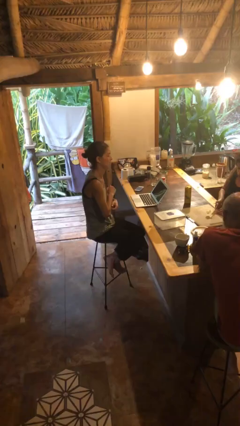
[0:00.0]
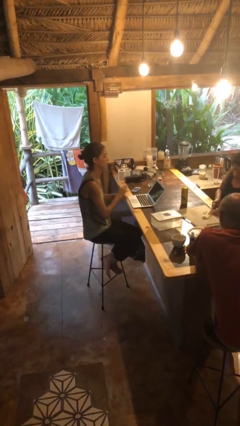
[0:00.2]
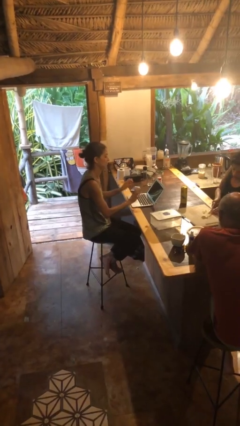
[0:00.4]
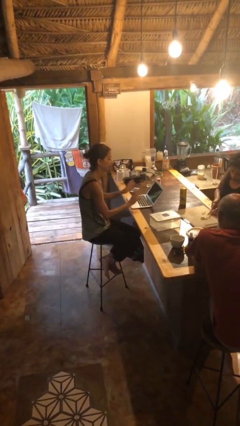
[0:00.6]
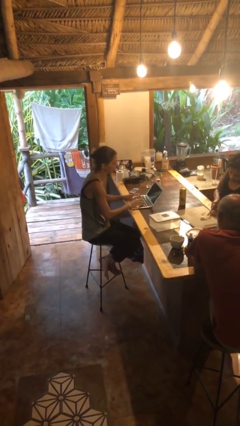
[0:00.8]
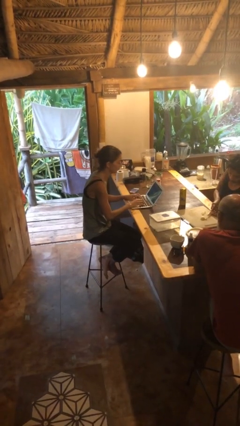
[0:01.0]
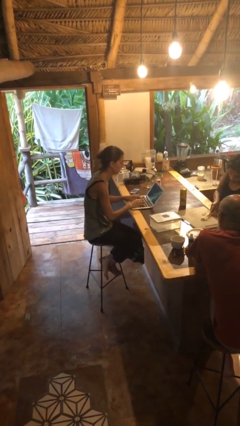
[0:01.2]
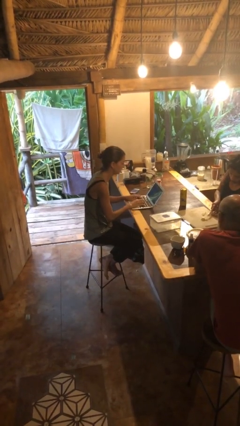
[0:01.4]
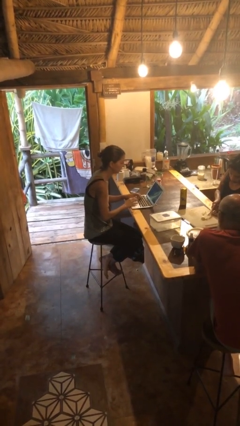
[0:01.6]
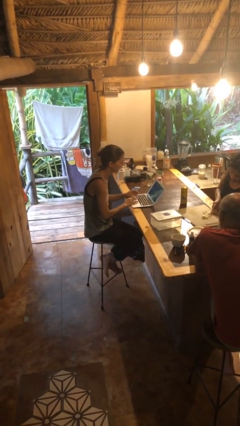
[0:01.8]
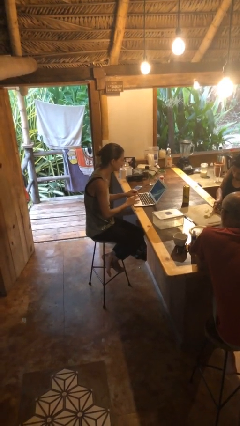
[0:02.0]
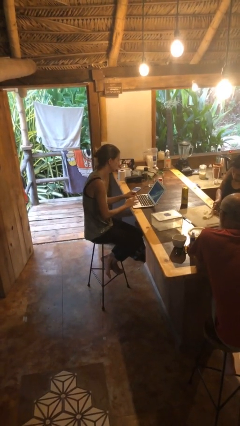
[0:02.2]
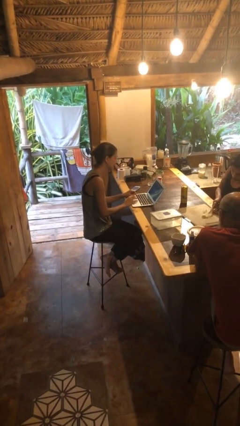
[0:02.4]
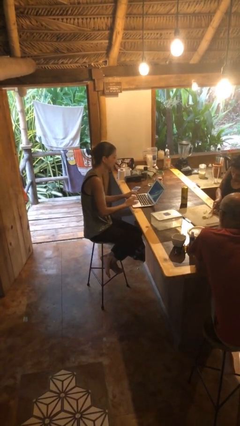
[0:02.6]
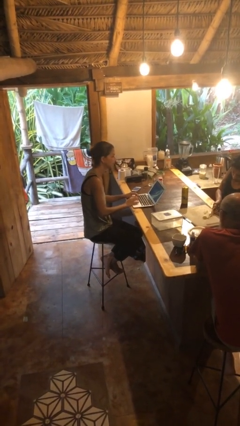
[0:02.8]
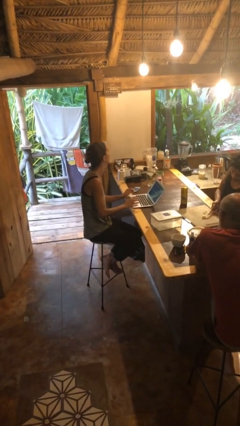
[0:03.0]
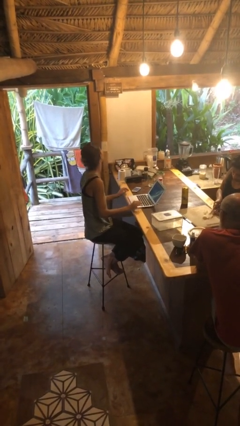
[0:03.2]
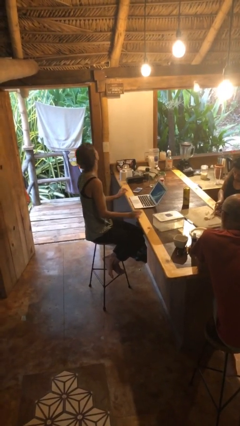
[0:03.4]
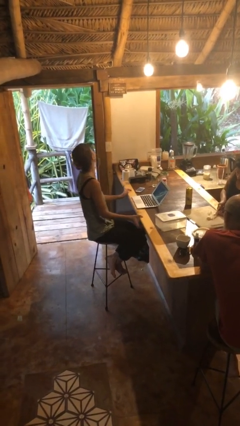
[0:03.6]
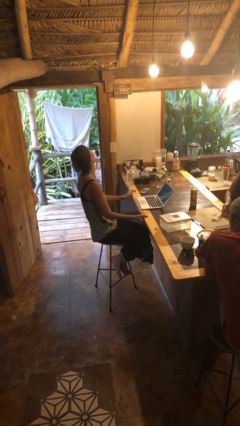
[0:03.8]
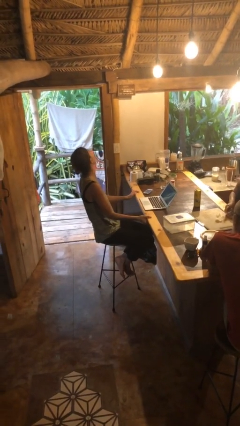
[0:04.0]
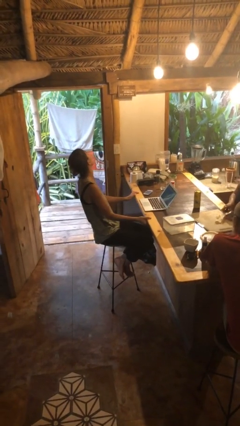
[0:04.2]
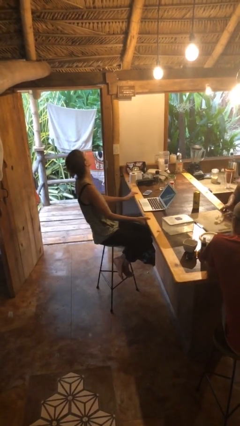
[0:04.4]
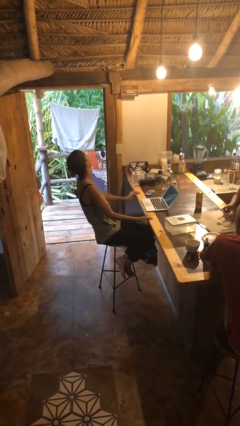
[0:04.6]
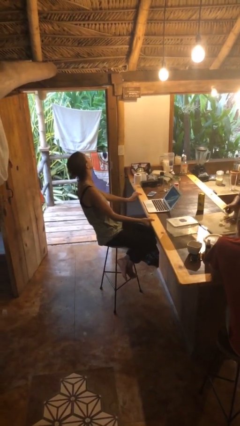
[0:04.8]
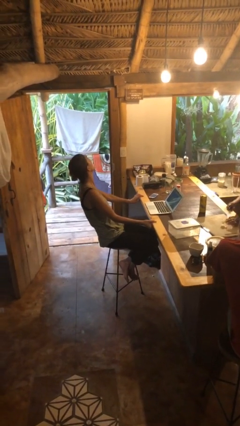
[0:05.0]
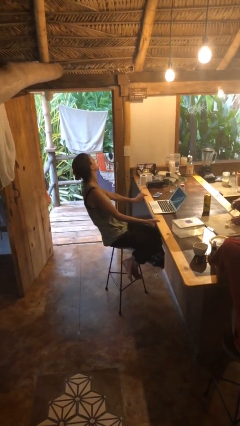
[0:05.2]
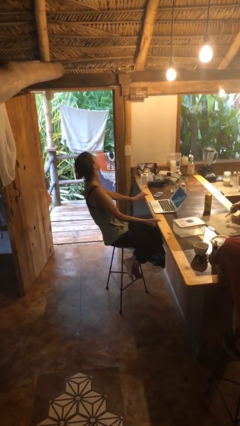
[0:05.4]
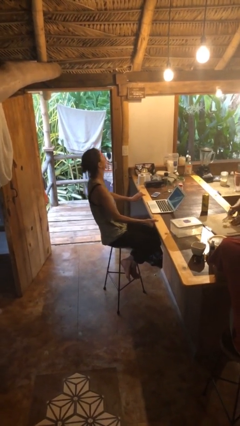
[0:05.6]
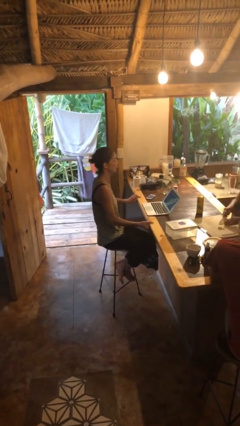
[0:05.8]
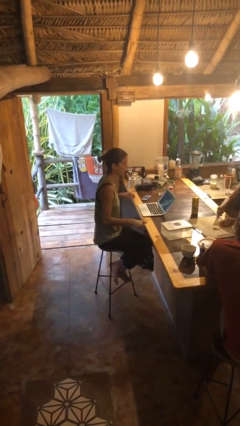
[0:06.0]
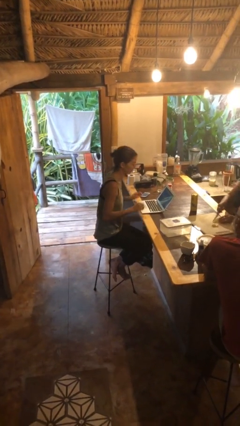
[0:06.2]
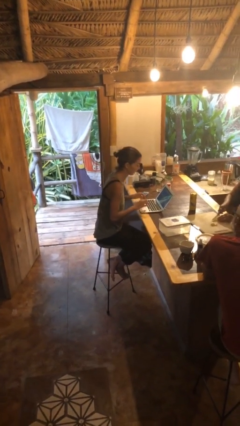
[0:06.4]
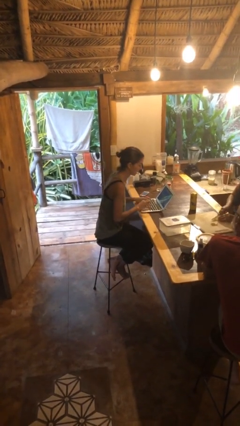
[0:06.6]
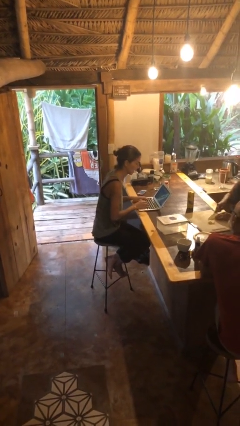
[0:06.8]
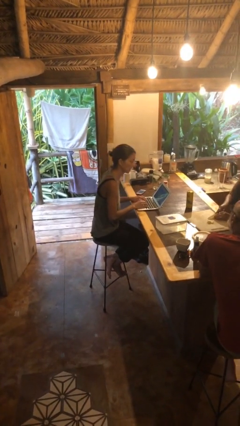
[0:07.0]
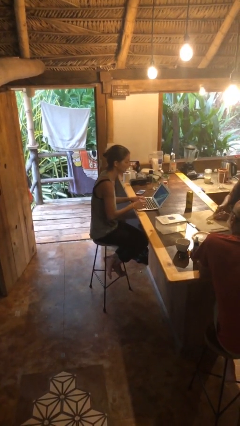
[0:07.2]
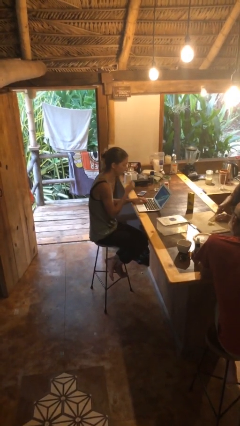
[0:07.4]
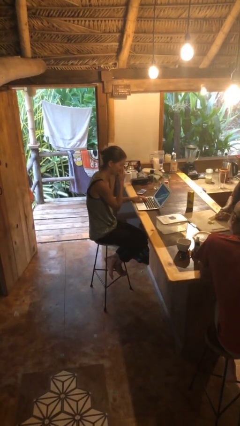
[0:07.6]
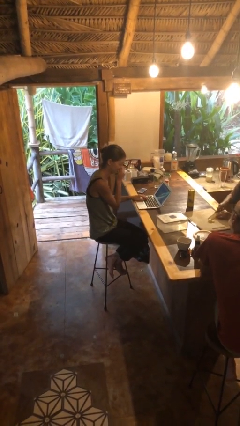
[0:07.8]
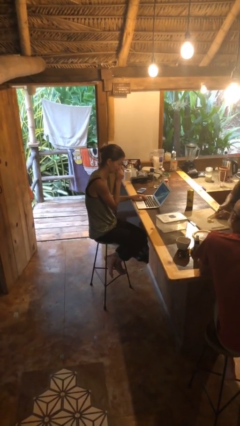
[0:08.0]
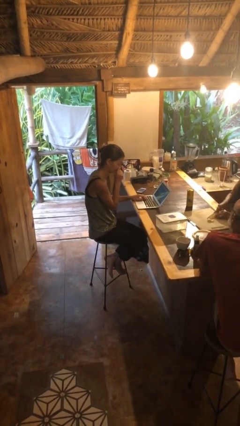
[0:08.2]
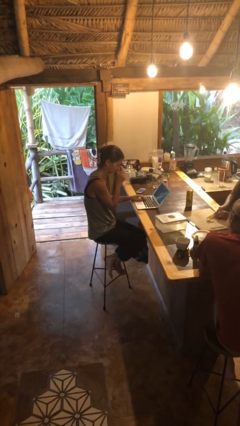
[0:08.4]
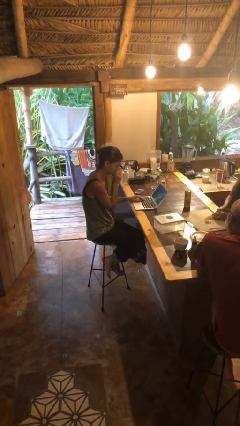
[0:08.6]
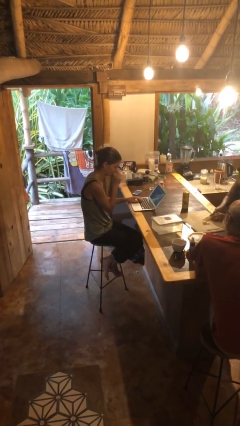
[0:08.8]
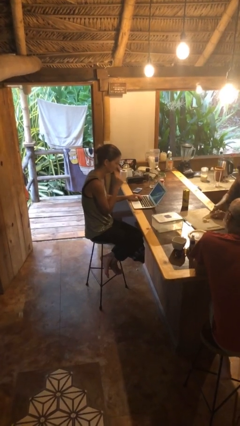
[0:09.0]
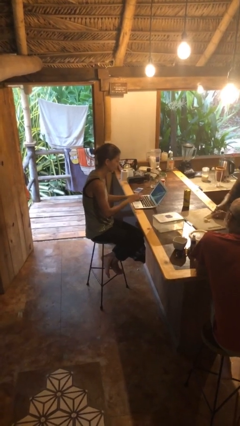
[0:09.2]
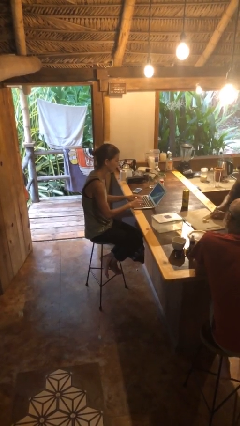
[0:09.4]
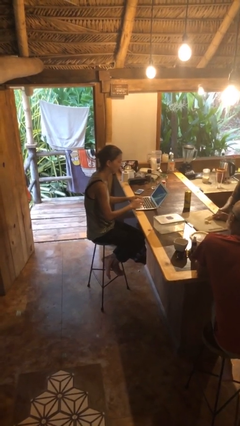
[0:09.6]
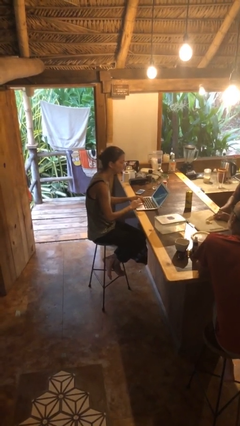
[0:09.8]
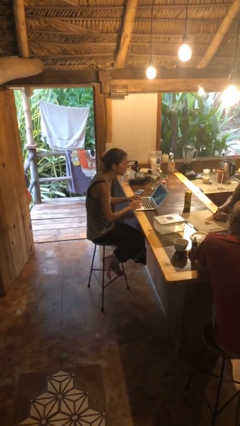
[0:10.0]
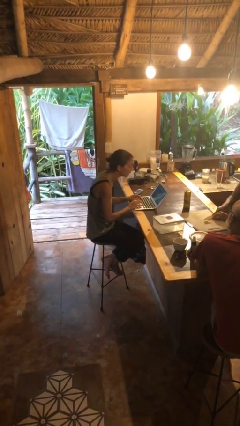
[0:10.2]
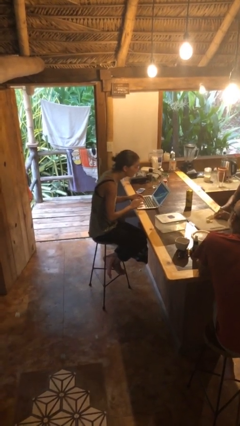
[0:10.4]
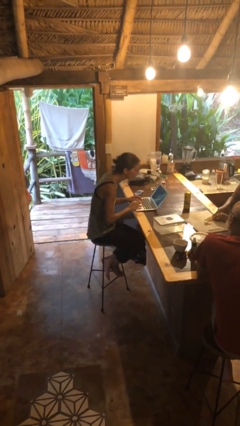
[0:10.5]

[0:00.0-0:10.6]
person interacts with laptop

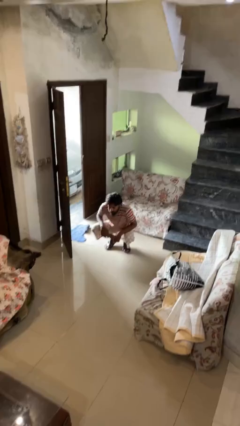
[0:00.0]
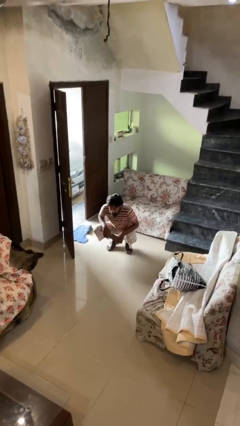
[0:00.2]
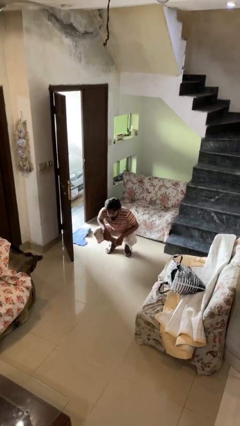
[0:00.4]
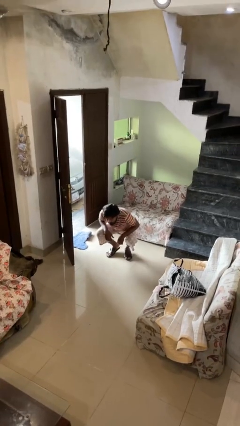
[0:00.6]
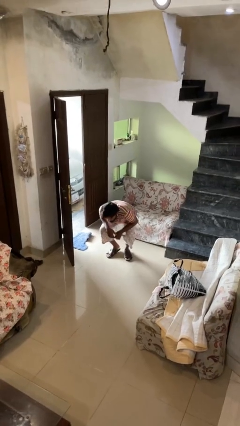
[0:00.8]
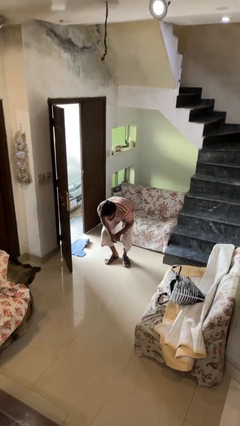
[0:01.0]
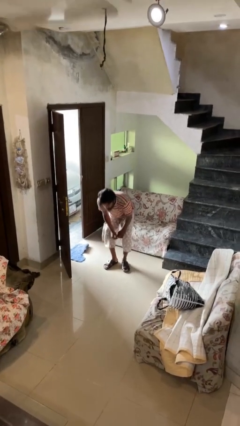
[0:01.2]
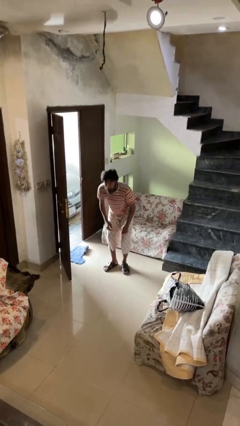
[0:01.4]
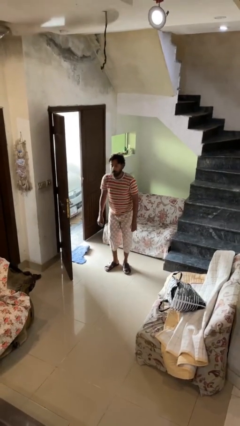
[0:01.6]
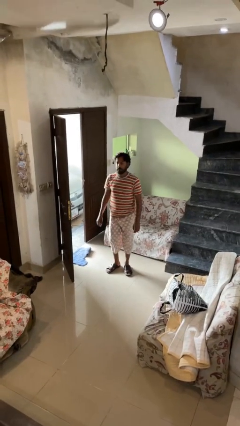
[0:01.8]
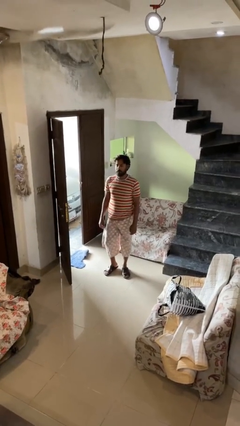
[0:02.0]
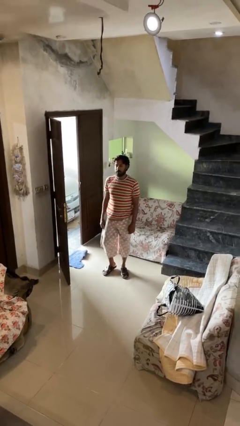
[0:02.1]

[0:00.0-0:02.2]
person stands up

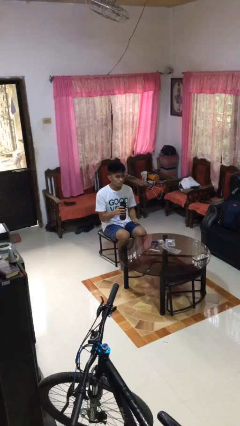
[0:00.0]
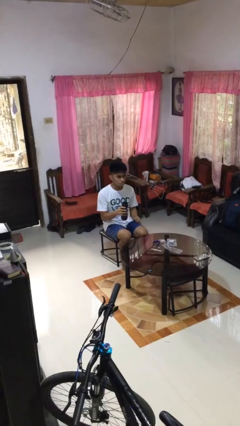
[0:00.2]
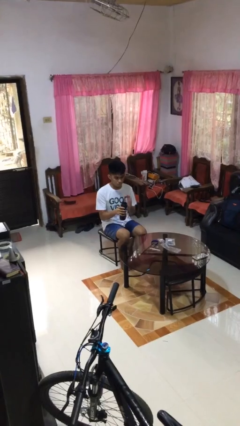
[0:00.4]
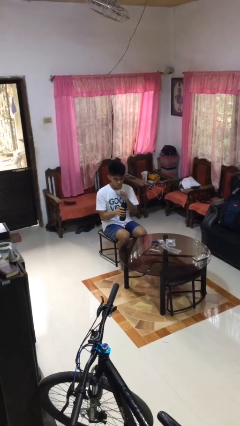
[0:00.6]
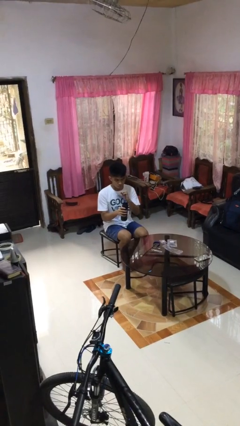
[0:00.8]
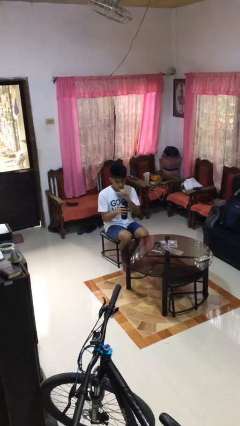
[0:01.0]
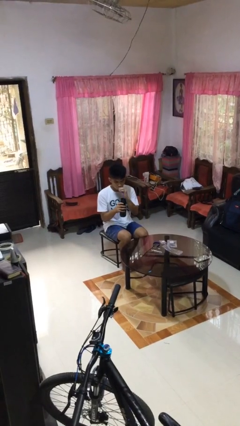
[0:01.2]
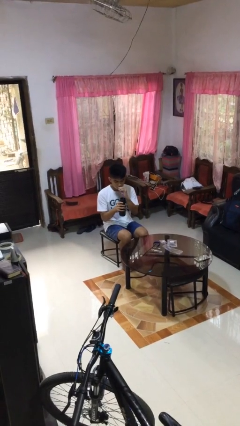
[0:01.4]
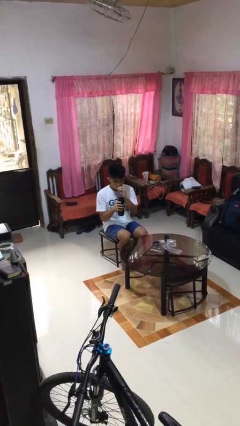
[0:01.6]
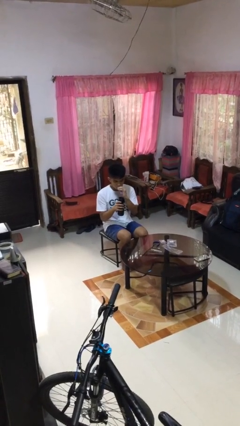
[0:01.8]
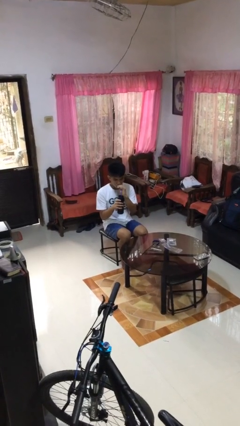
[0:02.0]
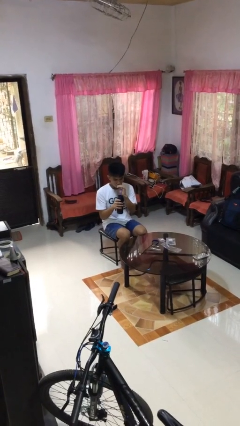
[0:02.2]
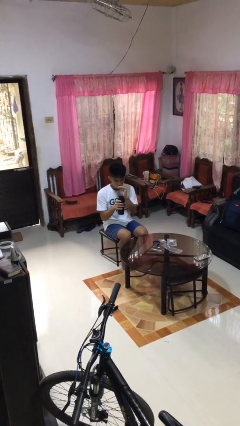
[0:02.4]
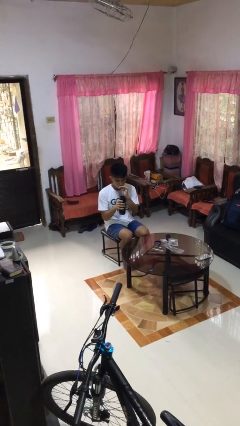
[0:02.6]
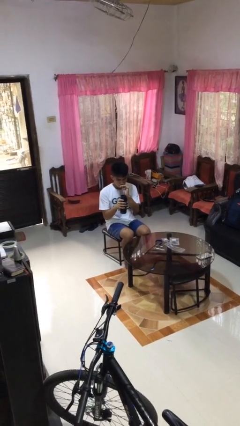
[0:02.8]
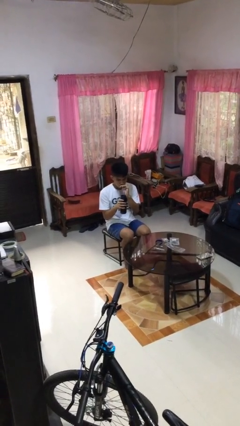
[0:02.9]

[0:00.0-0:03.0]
person drinks from straw

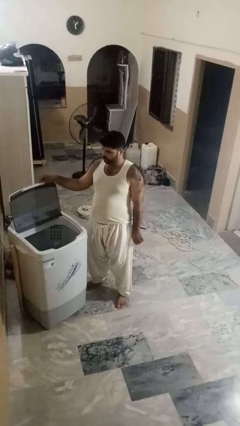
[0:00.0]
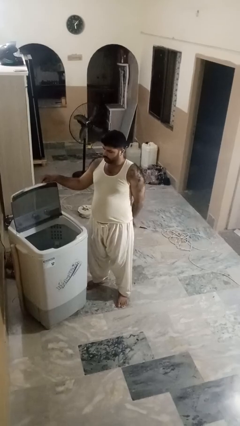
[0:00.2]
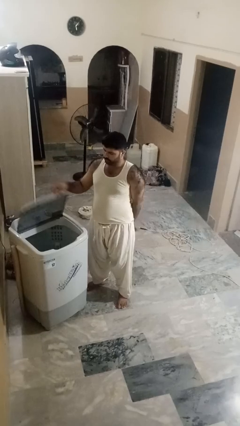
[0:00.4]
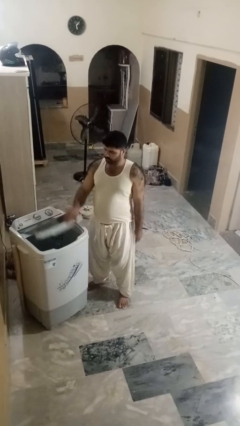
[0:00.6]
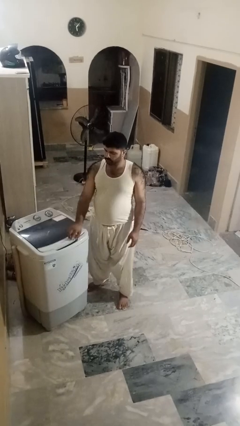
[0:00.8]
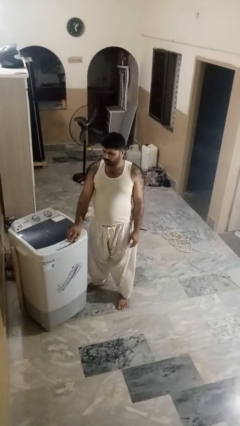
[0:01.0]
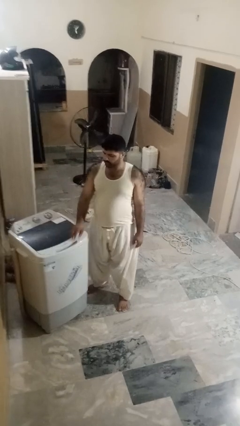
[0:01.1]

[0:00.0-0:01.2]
person closes clothes washer

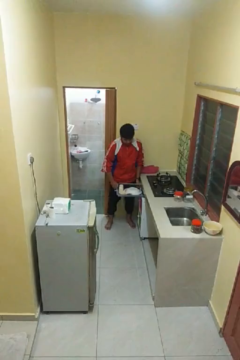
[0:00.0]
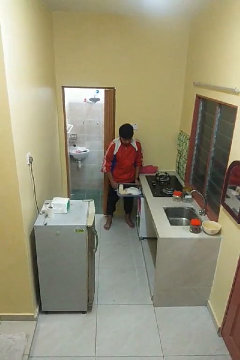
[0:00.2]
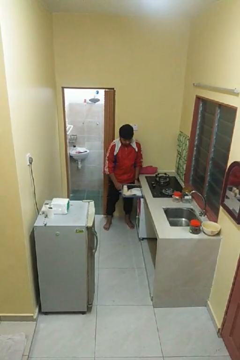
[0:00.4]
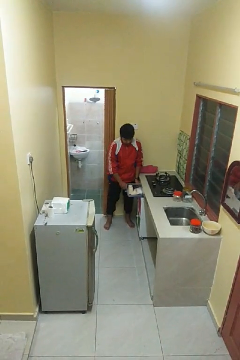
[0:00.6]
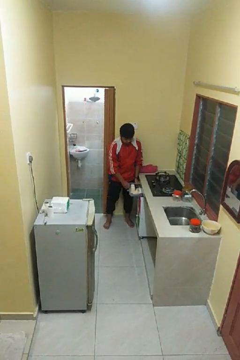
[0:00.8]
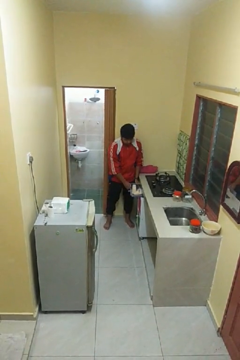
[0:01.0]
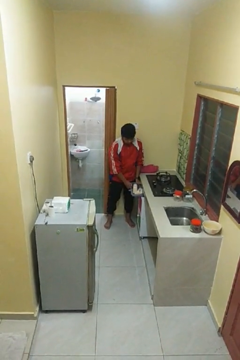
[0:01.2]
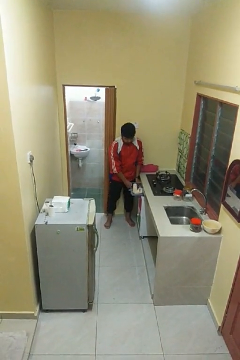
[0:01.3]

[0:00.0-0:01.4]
person closes kitchen drawer
